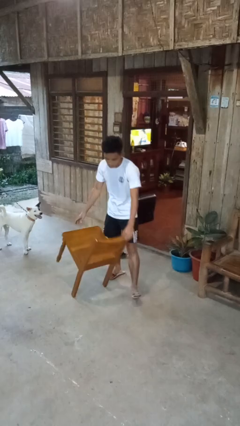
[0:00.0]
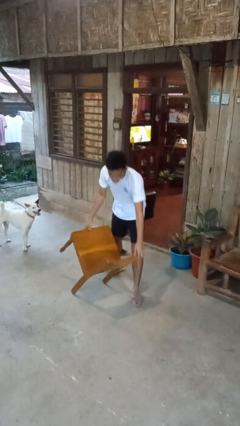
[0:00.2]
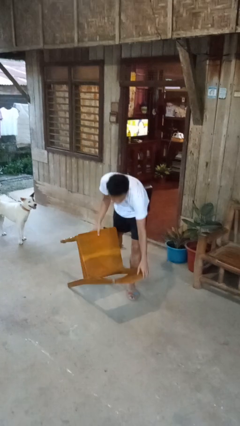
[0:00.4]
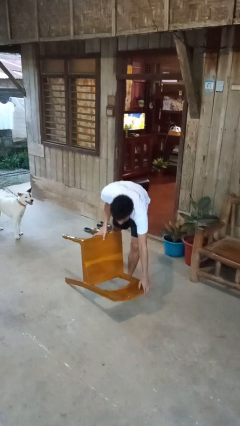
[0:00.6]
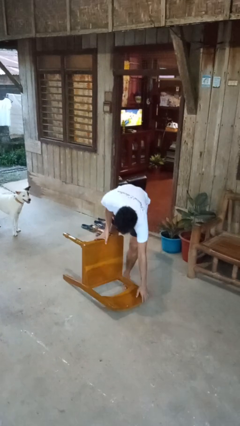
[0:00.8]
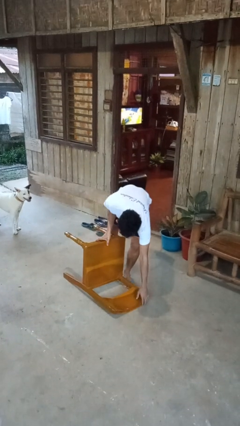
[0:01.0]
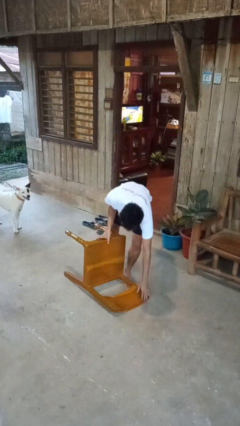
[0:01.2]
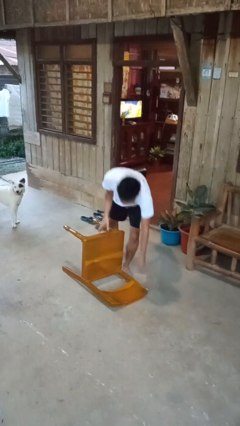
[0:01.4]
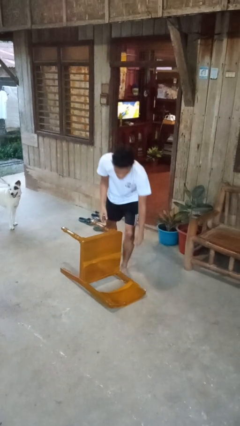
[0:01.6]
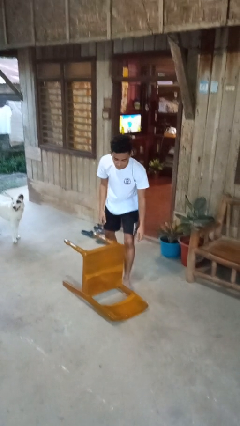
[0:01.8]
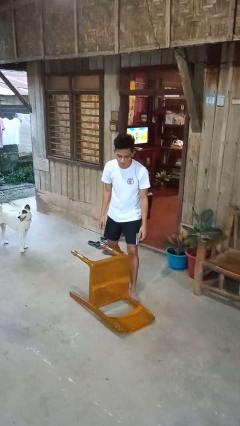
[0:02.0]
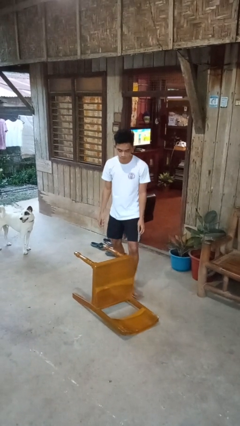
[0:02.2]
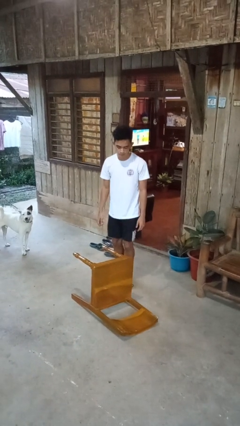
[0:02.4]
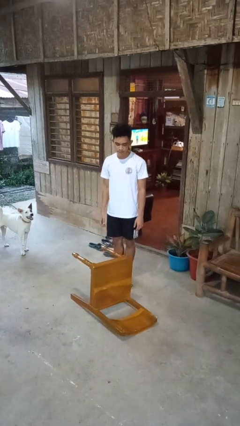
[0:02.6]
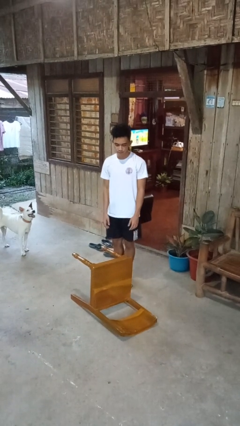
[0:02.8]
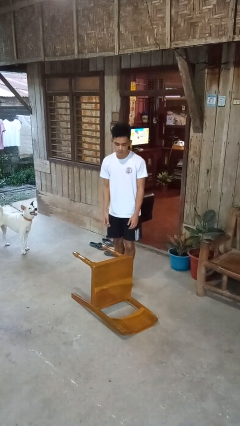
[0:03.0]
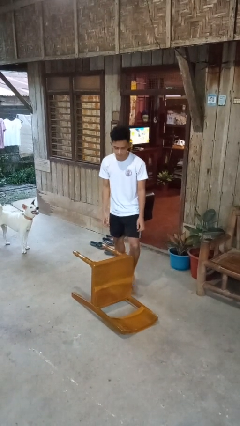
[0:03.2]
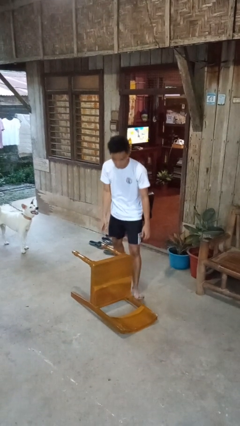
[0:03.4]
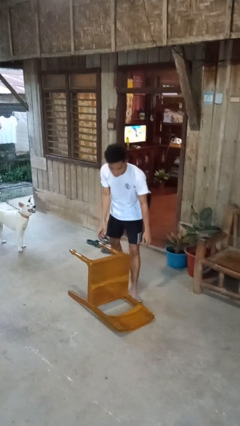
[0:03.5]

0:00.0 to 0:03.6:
person knocks over furniture

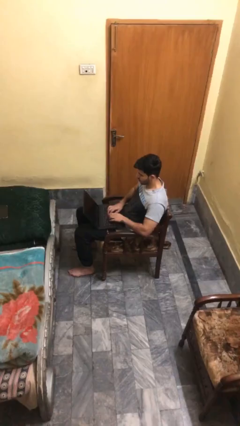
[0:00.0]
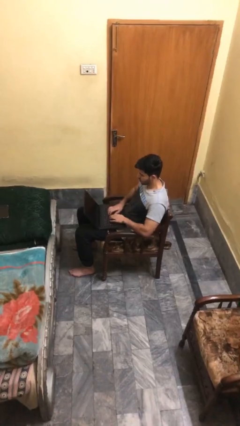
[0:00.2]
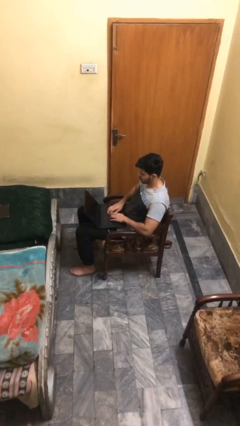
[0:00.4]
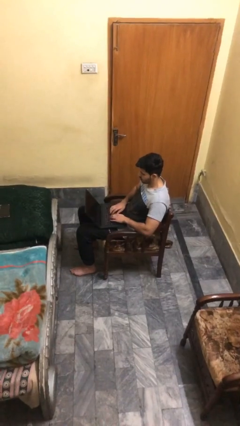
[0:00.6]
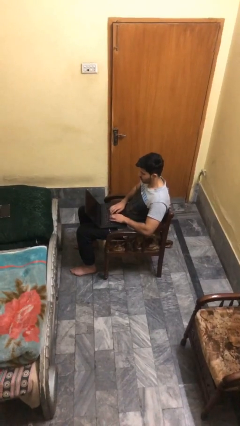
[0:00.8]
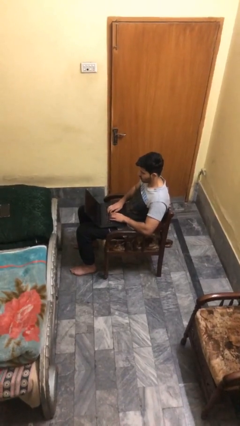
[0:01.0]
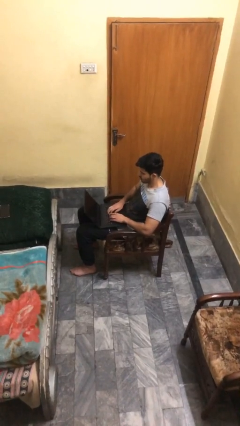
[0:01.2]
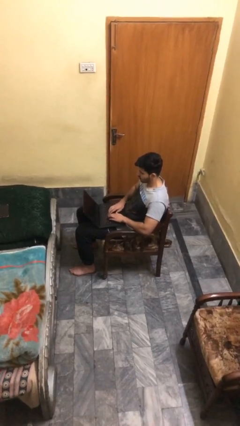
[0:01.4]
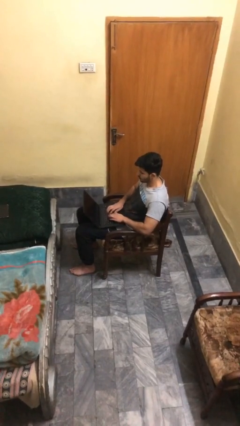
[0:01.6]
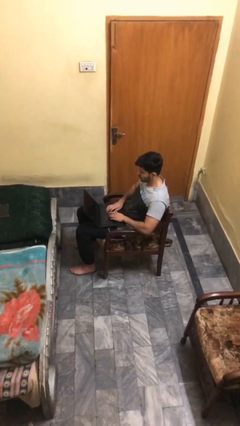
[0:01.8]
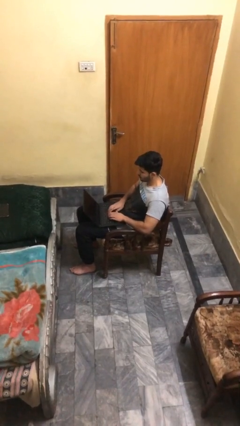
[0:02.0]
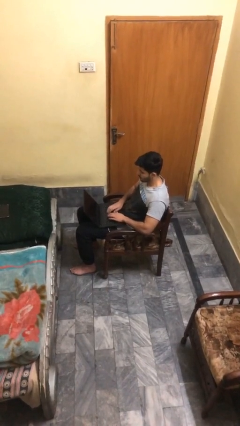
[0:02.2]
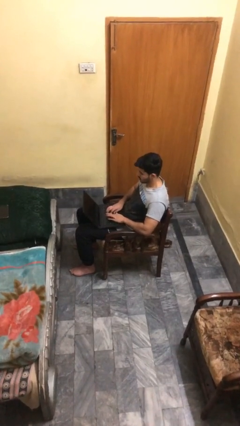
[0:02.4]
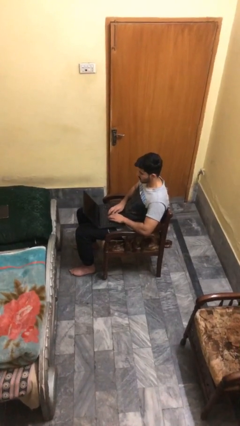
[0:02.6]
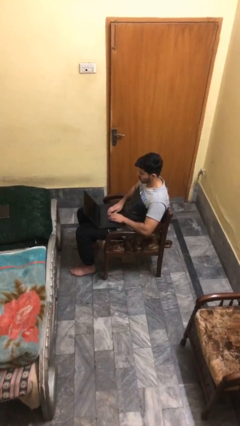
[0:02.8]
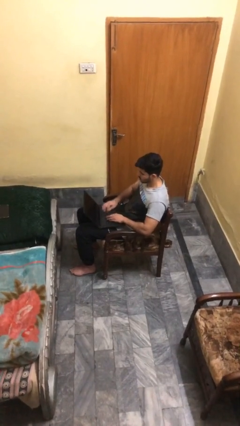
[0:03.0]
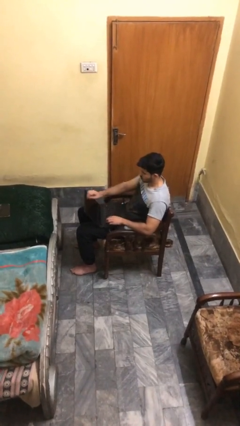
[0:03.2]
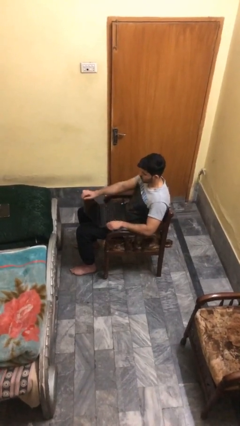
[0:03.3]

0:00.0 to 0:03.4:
person interacts with laptop

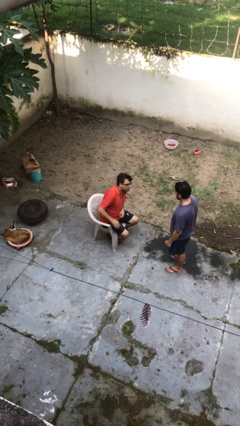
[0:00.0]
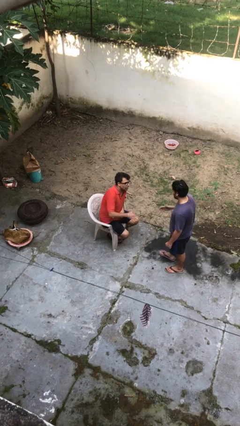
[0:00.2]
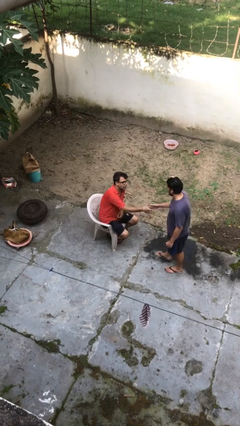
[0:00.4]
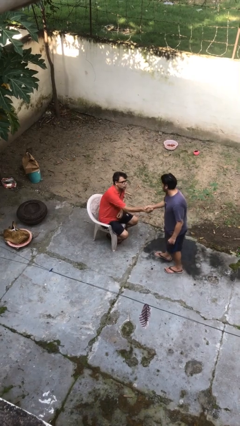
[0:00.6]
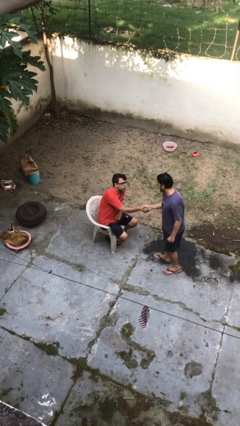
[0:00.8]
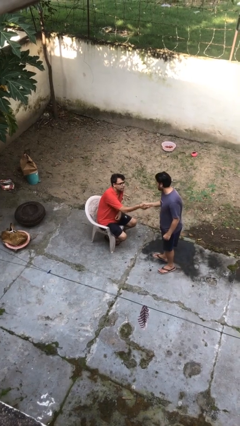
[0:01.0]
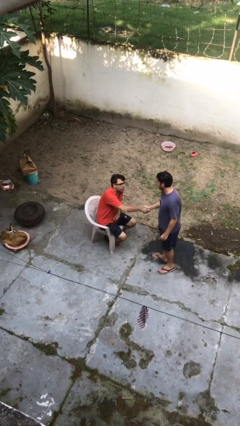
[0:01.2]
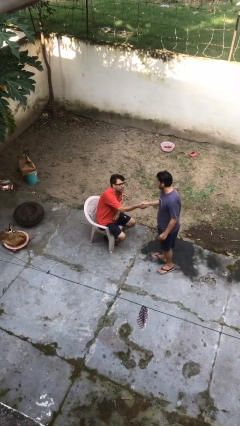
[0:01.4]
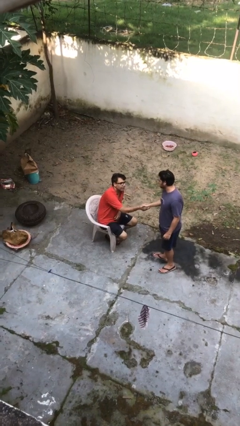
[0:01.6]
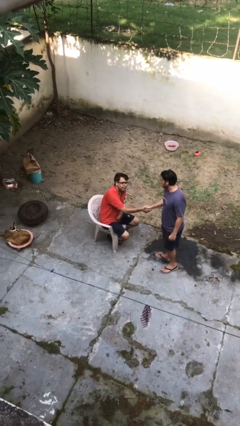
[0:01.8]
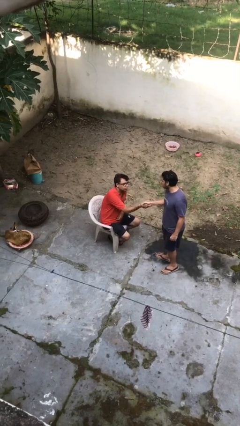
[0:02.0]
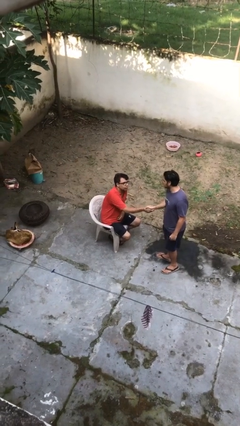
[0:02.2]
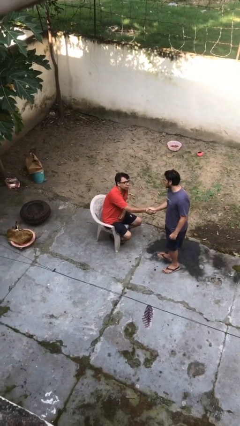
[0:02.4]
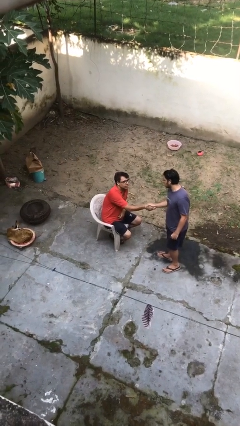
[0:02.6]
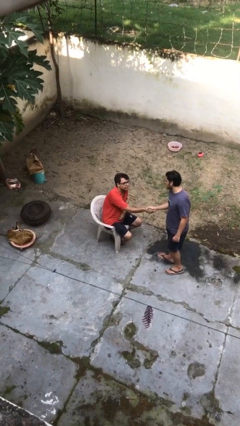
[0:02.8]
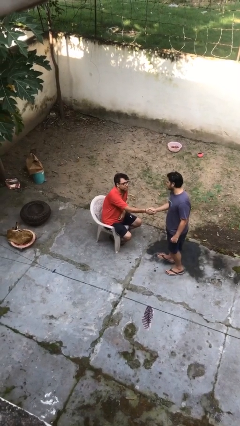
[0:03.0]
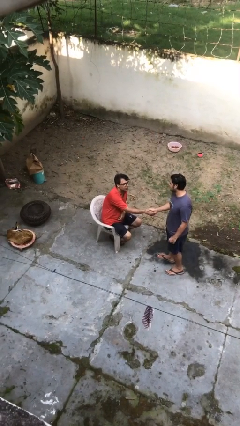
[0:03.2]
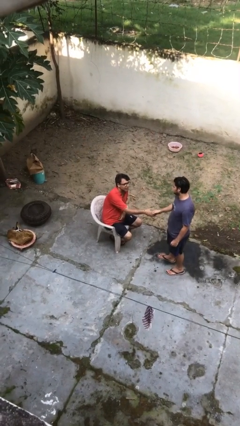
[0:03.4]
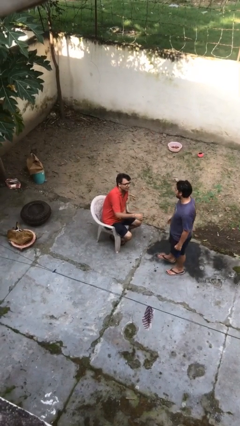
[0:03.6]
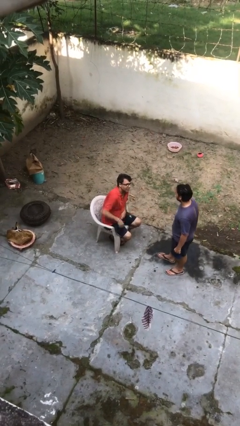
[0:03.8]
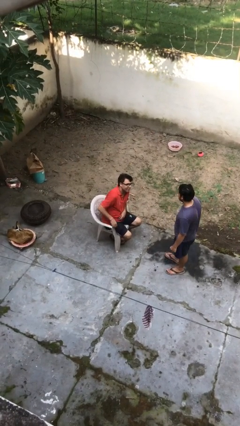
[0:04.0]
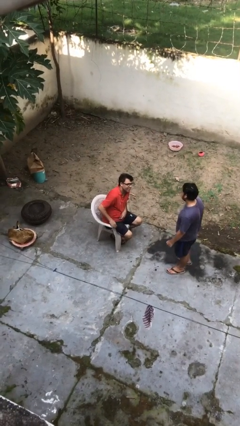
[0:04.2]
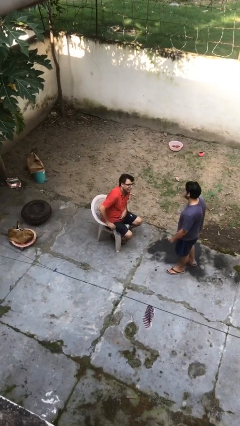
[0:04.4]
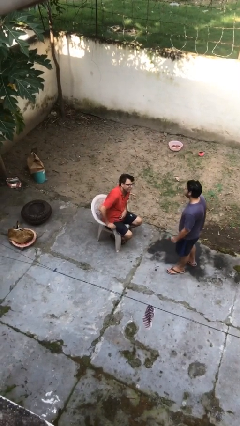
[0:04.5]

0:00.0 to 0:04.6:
person shakes hand

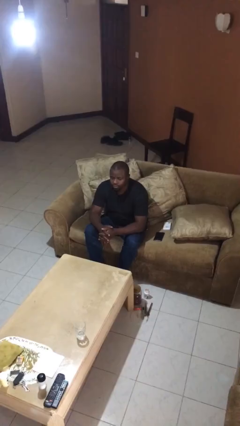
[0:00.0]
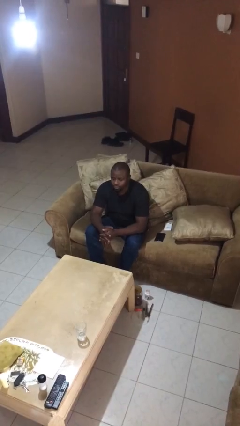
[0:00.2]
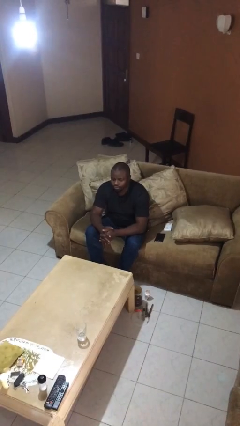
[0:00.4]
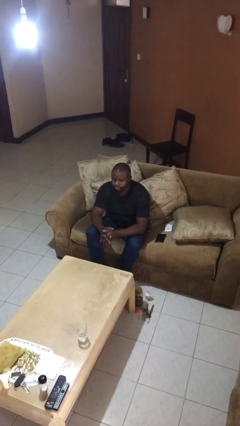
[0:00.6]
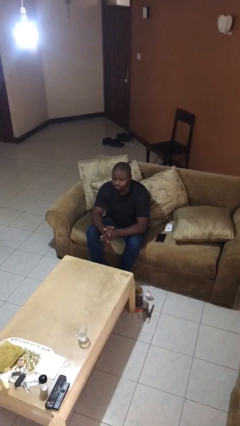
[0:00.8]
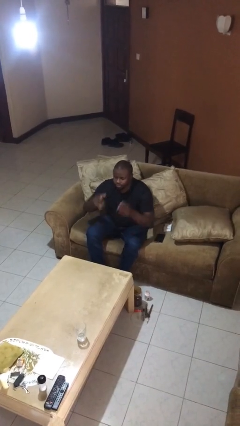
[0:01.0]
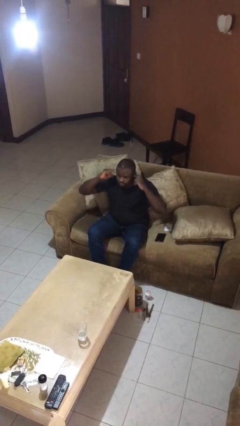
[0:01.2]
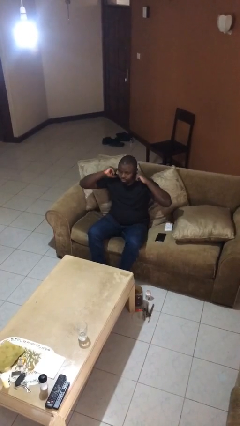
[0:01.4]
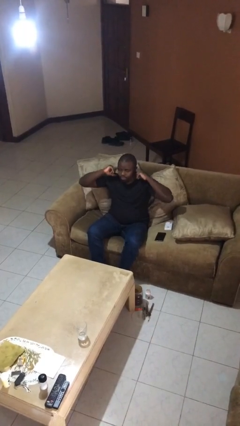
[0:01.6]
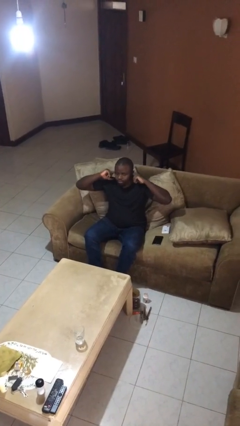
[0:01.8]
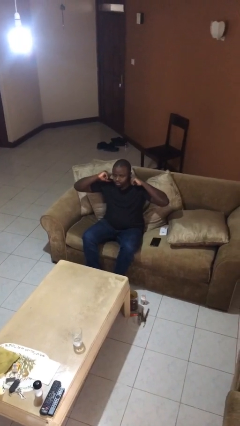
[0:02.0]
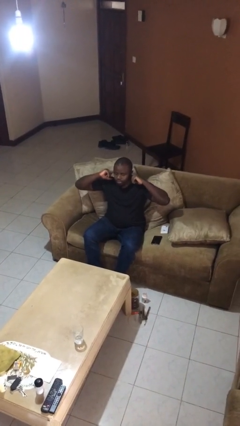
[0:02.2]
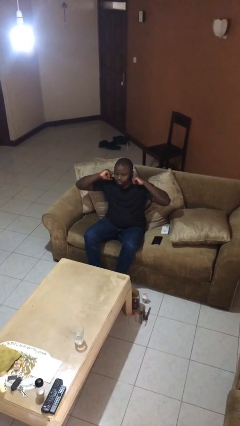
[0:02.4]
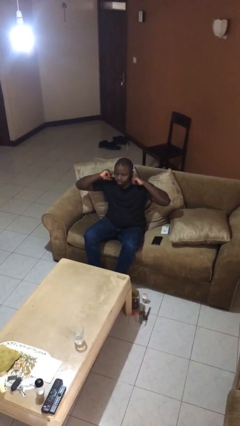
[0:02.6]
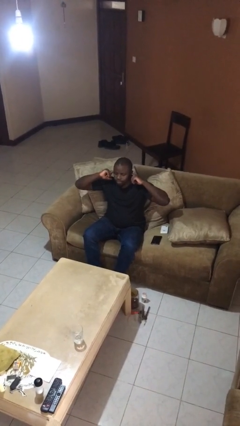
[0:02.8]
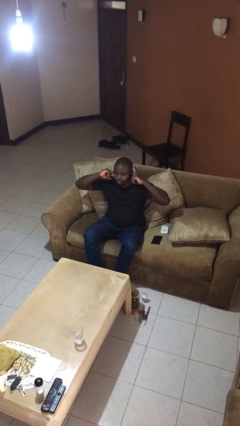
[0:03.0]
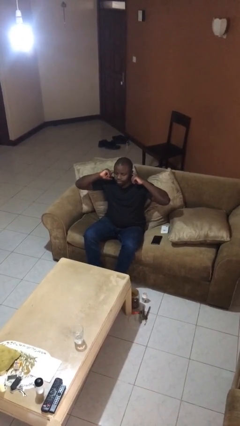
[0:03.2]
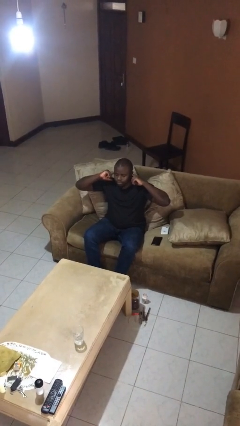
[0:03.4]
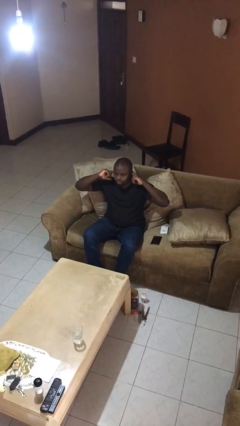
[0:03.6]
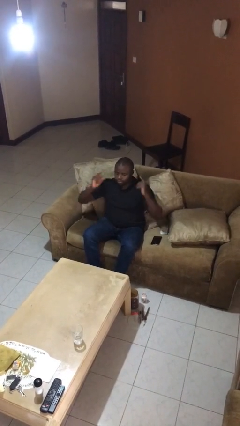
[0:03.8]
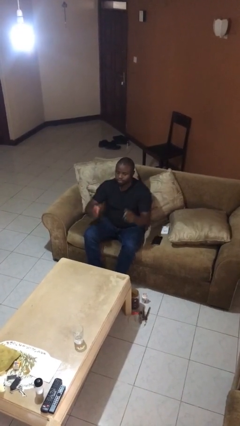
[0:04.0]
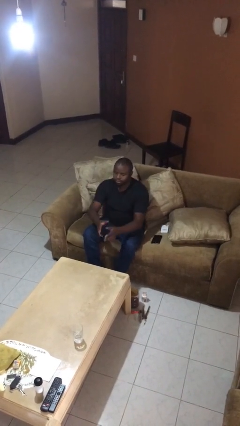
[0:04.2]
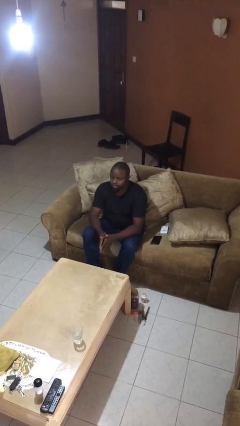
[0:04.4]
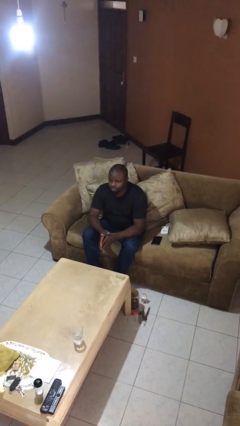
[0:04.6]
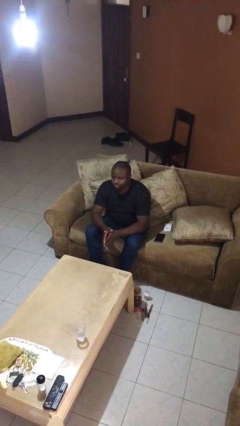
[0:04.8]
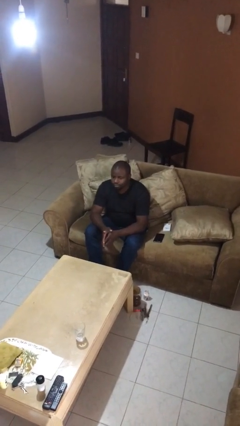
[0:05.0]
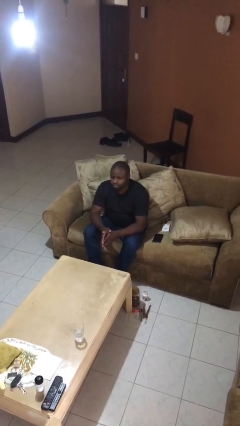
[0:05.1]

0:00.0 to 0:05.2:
person puts fingers in ear

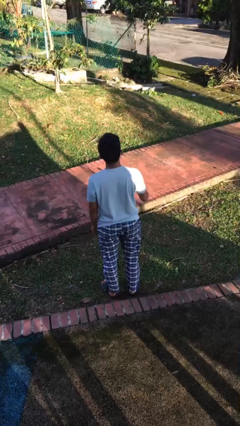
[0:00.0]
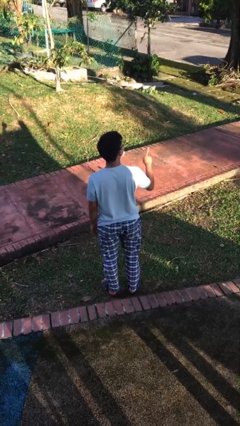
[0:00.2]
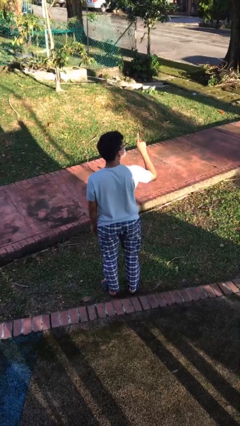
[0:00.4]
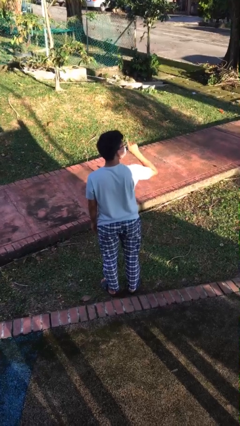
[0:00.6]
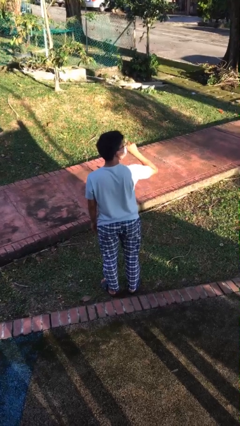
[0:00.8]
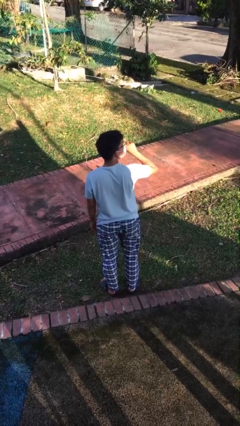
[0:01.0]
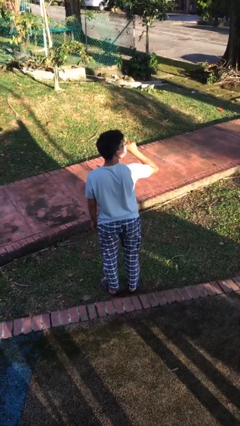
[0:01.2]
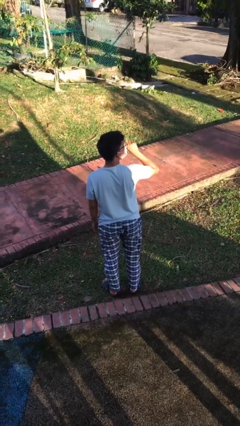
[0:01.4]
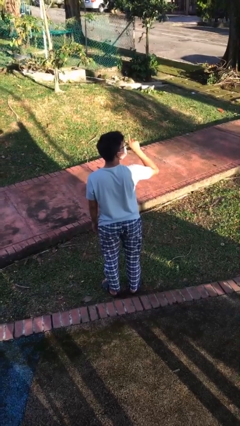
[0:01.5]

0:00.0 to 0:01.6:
person gestures be quiet
